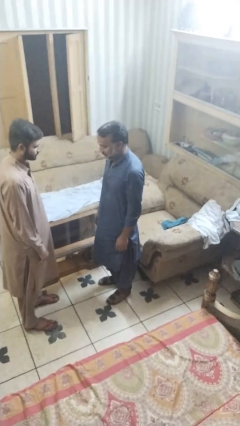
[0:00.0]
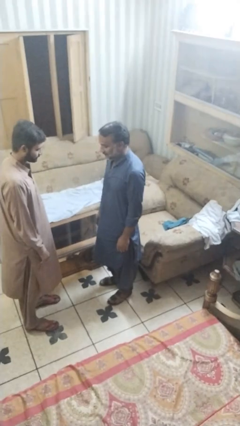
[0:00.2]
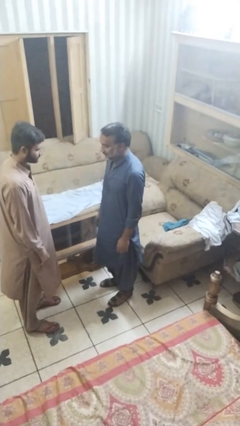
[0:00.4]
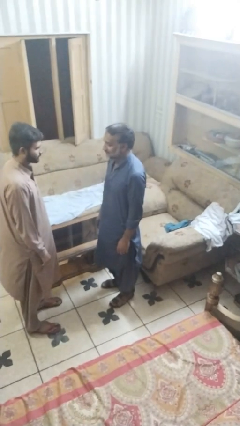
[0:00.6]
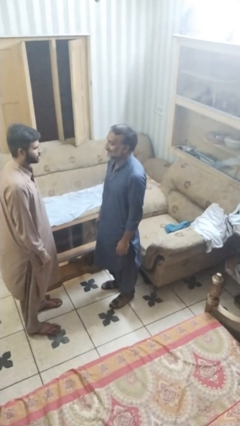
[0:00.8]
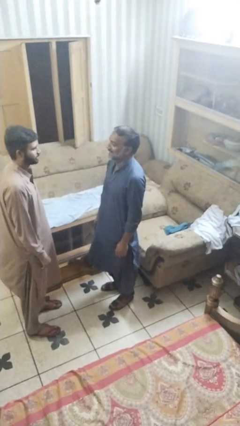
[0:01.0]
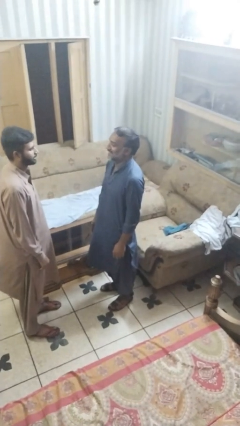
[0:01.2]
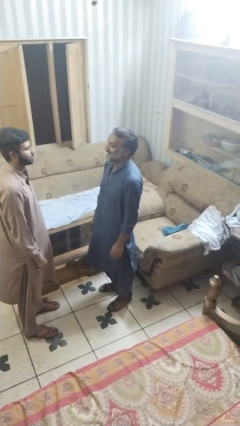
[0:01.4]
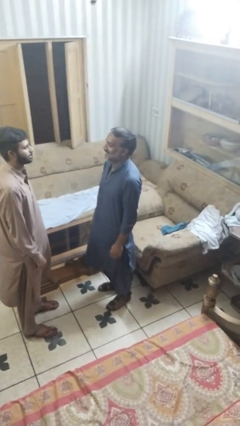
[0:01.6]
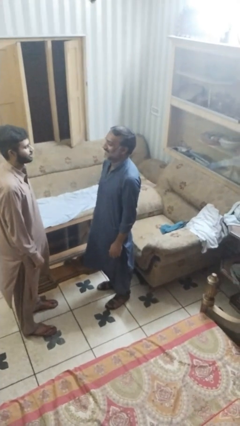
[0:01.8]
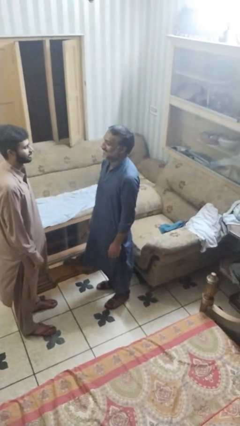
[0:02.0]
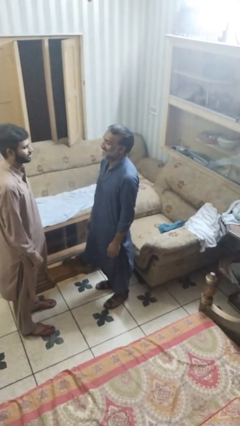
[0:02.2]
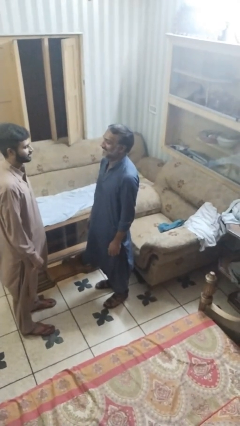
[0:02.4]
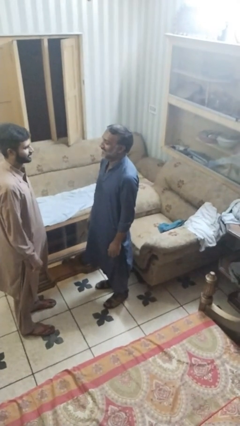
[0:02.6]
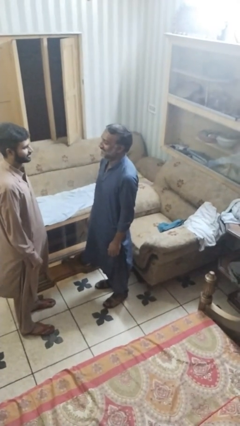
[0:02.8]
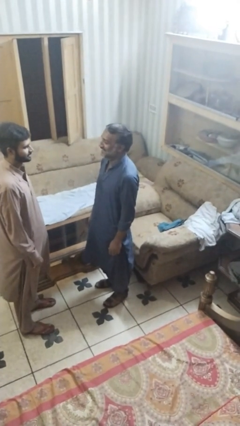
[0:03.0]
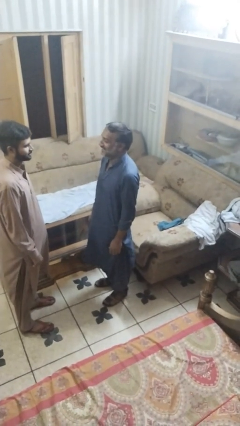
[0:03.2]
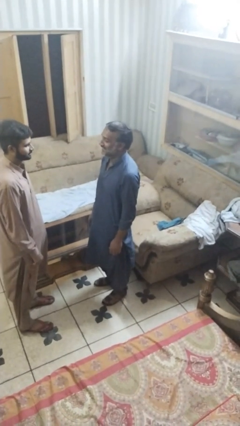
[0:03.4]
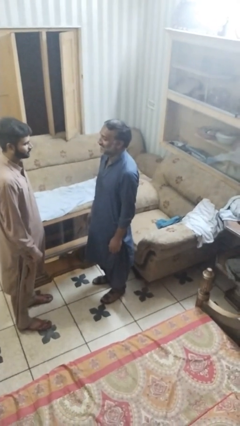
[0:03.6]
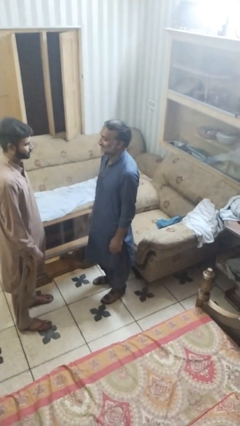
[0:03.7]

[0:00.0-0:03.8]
person laughs with person

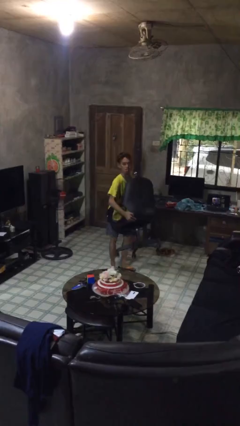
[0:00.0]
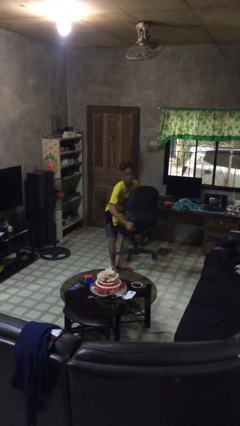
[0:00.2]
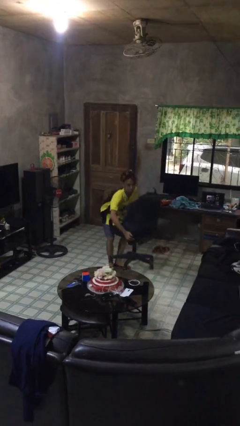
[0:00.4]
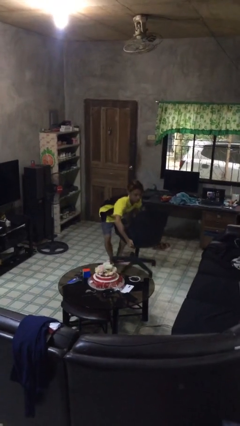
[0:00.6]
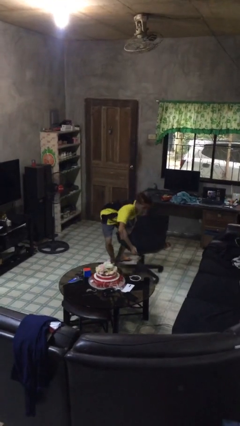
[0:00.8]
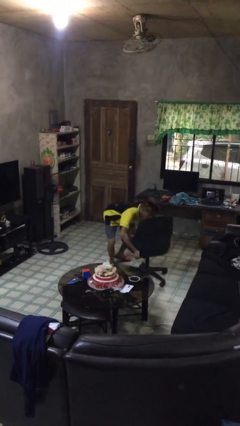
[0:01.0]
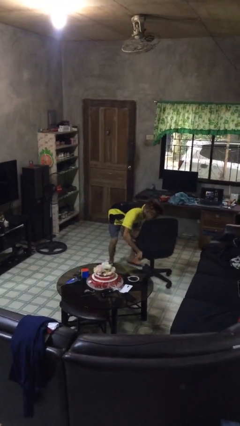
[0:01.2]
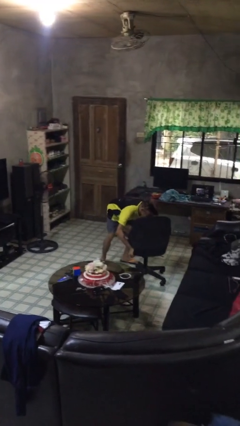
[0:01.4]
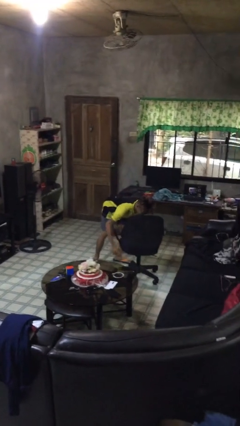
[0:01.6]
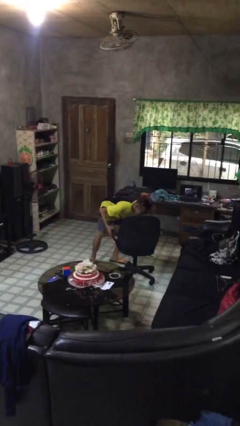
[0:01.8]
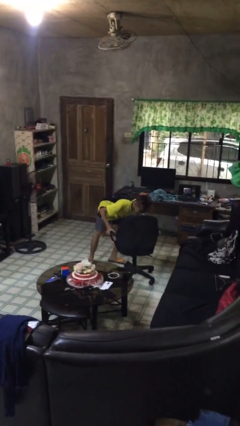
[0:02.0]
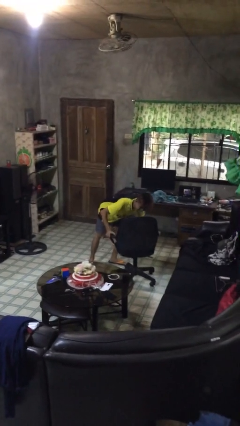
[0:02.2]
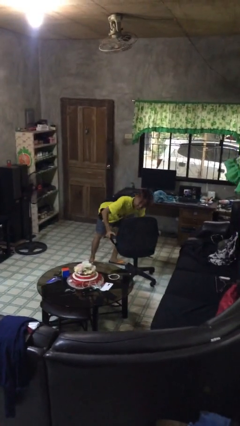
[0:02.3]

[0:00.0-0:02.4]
person puts down object on floor

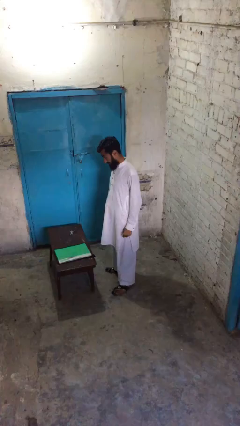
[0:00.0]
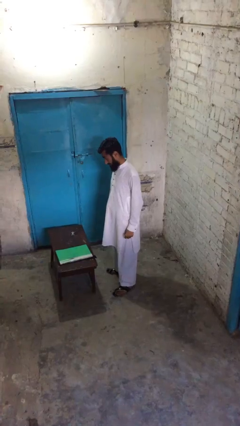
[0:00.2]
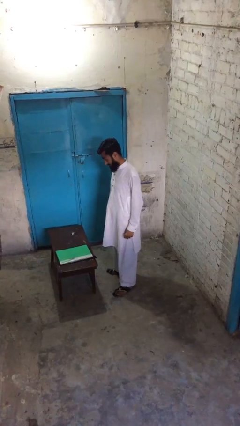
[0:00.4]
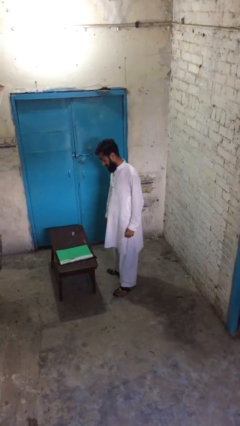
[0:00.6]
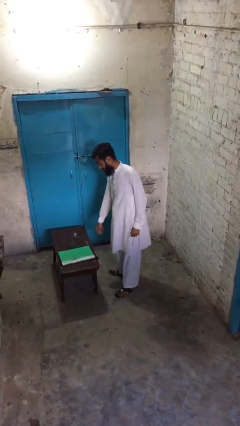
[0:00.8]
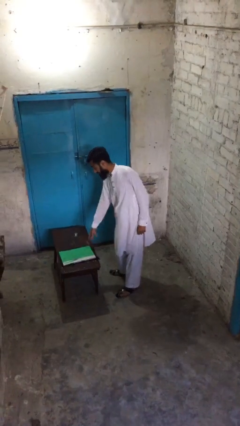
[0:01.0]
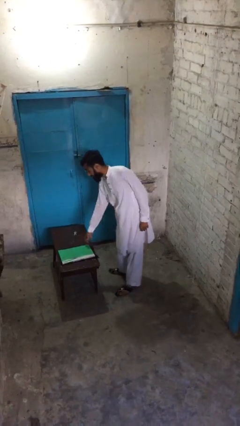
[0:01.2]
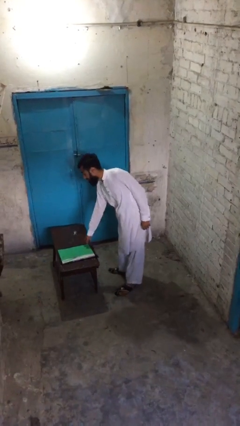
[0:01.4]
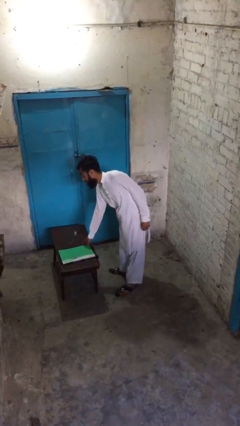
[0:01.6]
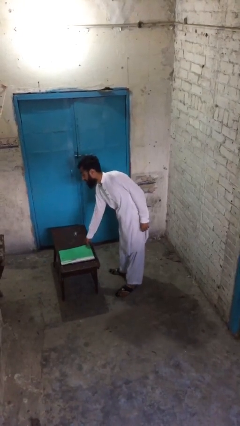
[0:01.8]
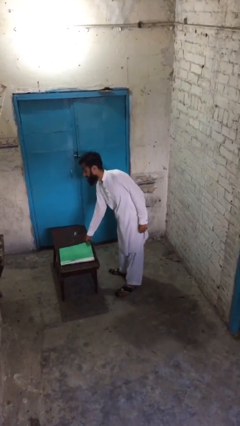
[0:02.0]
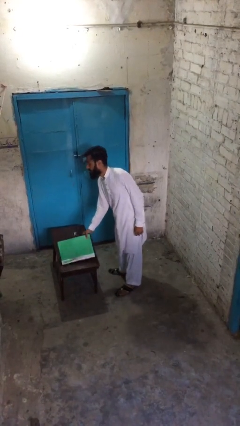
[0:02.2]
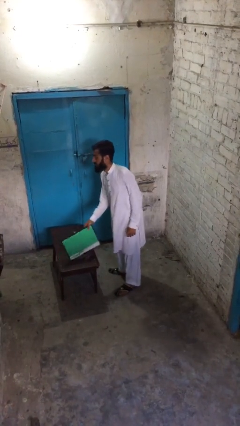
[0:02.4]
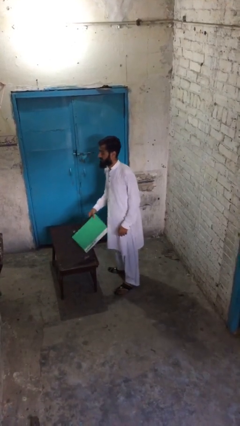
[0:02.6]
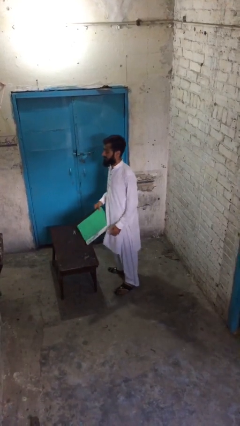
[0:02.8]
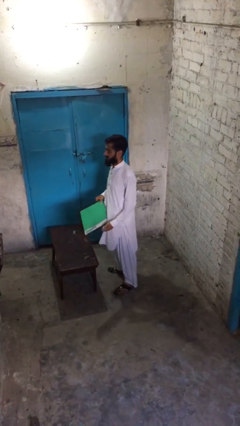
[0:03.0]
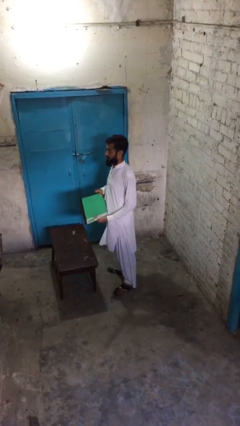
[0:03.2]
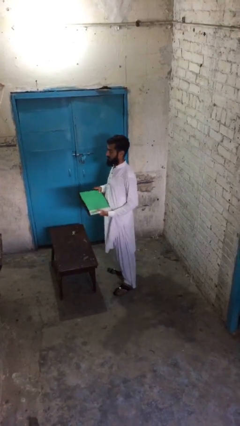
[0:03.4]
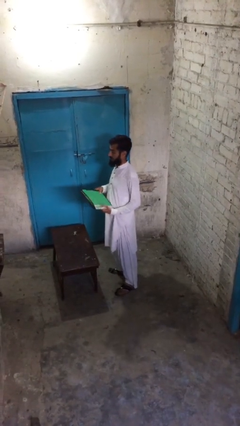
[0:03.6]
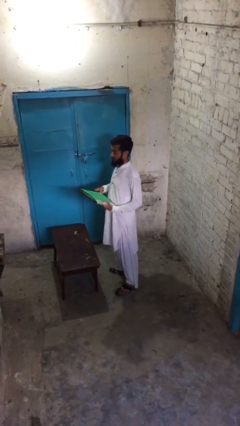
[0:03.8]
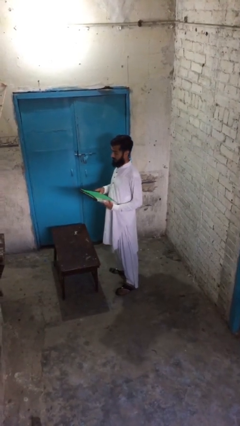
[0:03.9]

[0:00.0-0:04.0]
person picks up object from table

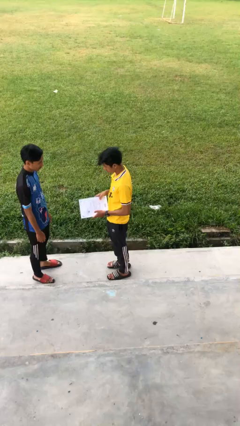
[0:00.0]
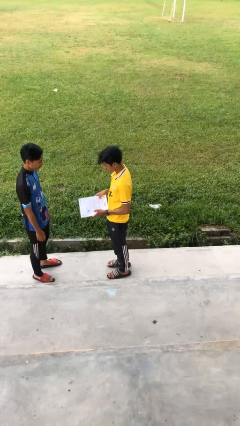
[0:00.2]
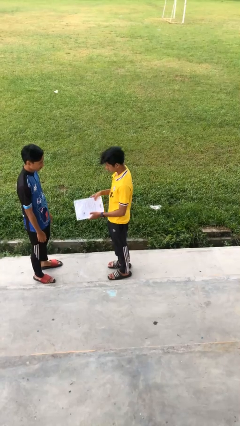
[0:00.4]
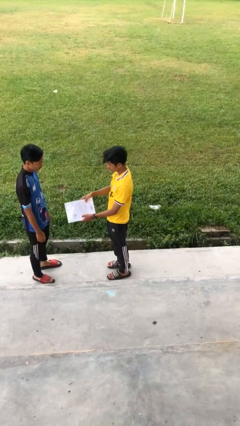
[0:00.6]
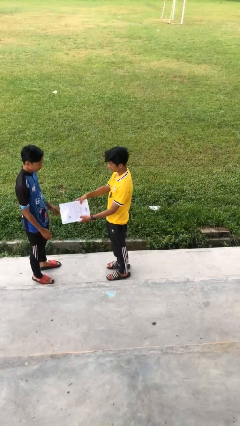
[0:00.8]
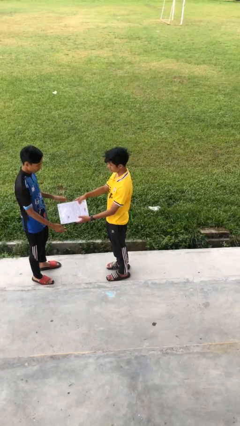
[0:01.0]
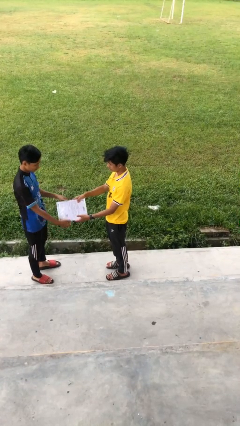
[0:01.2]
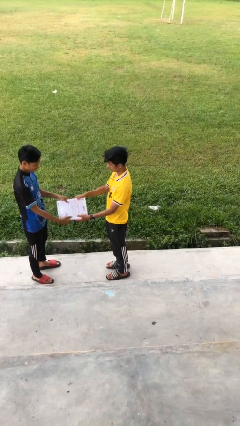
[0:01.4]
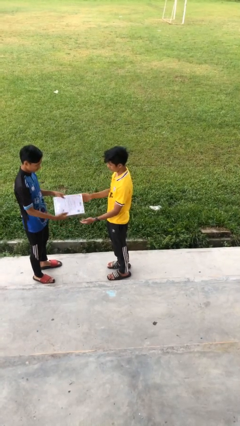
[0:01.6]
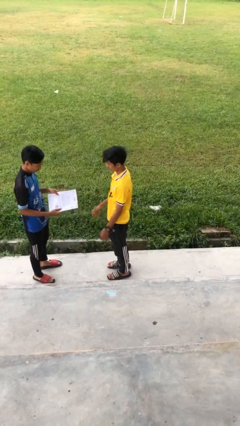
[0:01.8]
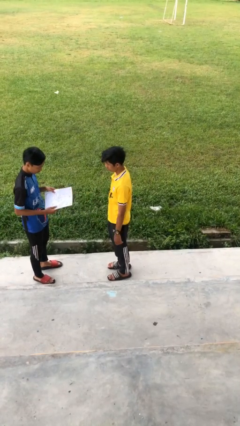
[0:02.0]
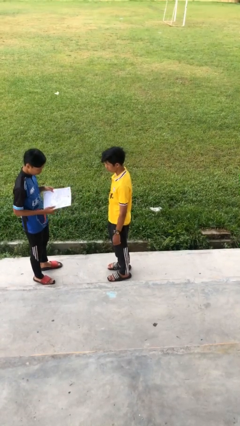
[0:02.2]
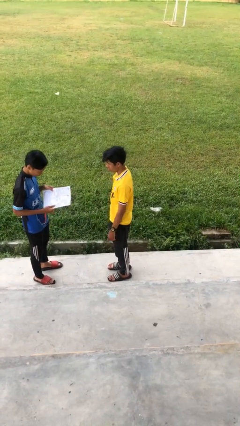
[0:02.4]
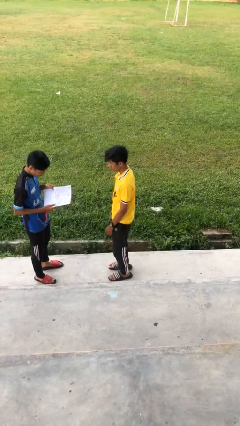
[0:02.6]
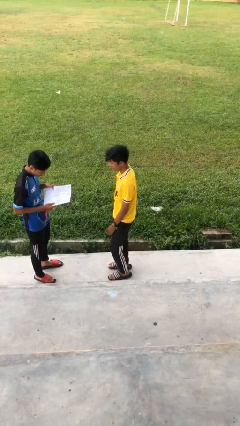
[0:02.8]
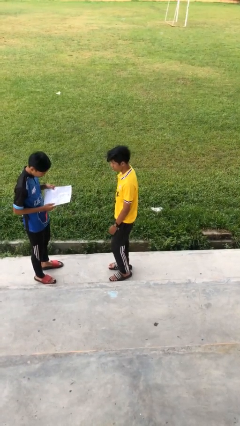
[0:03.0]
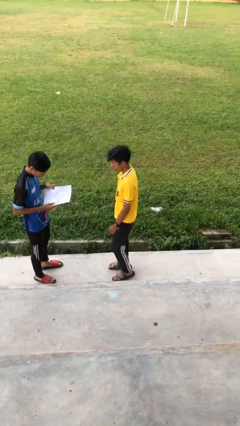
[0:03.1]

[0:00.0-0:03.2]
person transfers object to person

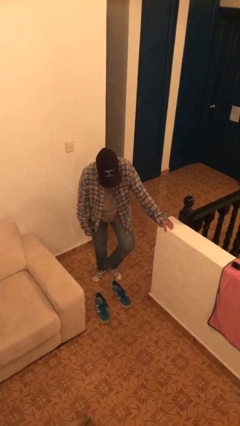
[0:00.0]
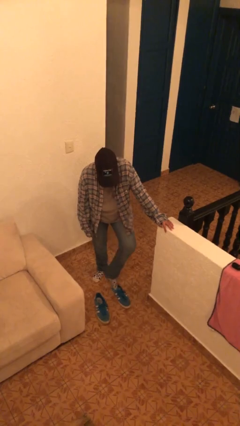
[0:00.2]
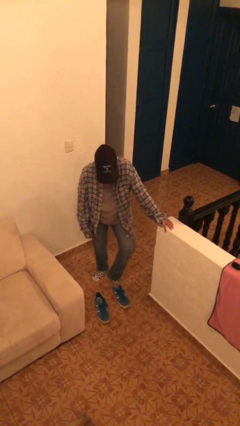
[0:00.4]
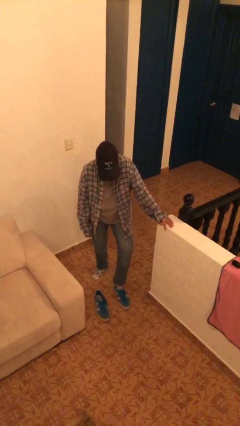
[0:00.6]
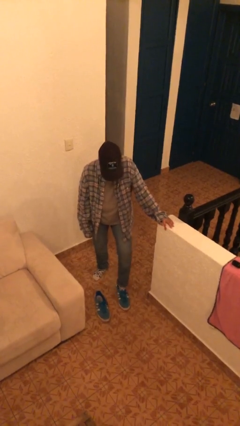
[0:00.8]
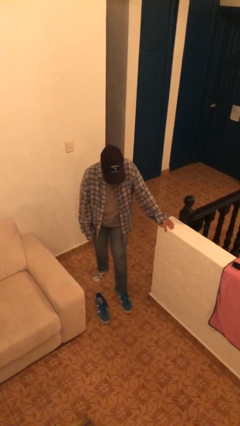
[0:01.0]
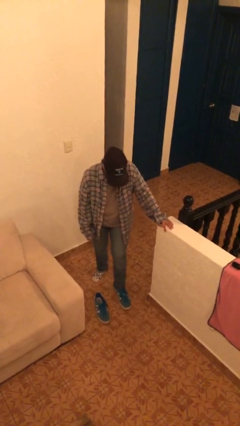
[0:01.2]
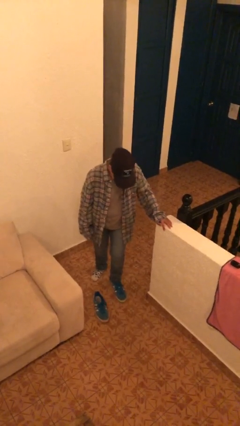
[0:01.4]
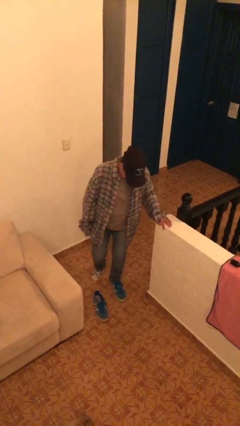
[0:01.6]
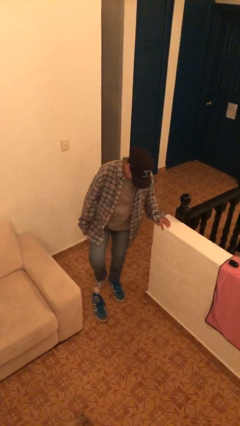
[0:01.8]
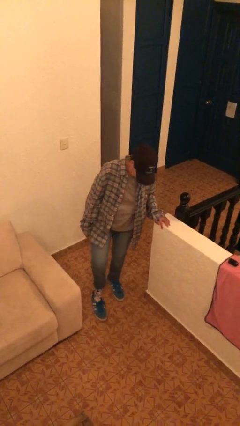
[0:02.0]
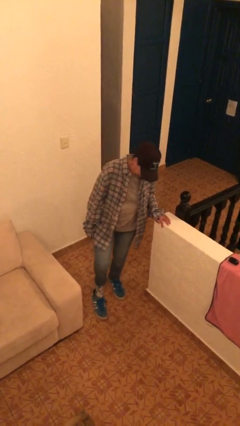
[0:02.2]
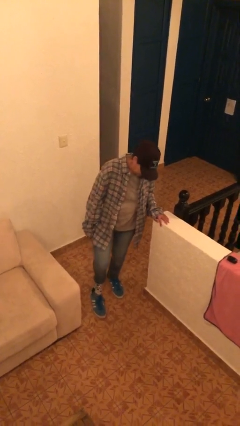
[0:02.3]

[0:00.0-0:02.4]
person puts on shoes

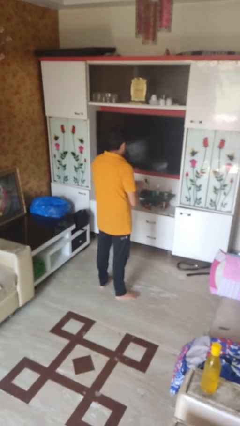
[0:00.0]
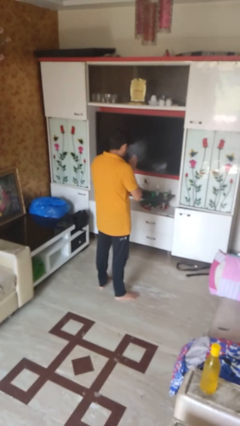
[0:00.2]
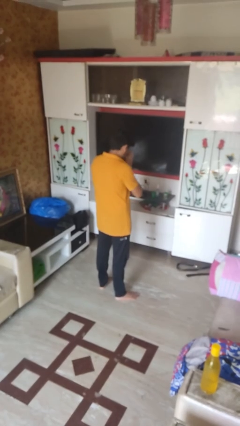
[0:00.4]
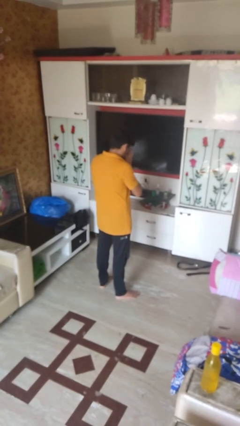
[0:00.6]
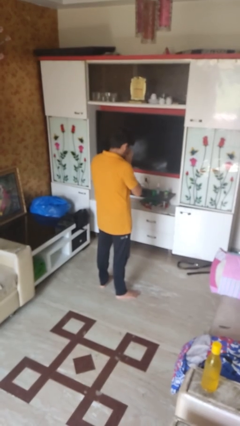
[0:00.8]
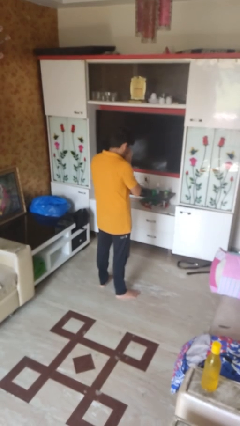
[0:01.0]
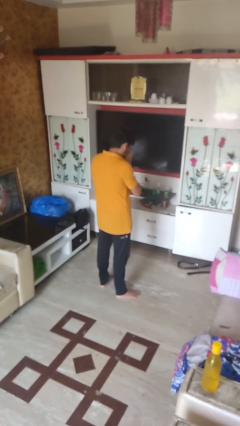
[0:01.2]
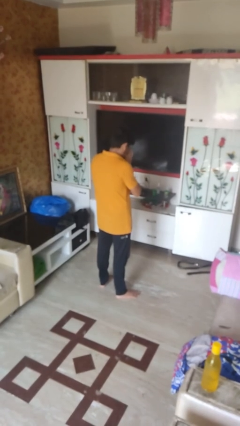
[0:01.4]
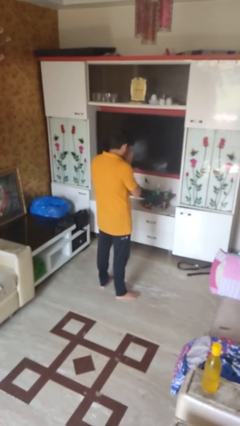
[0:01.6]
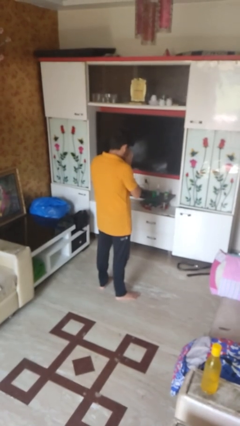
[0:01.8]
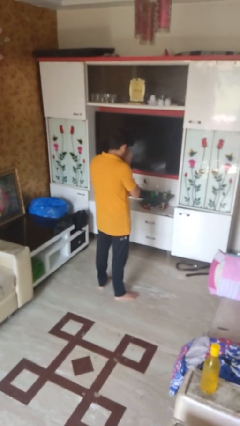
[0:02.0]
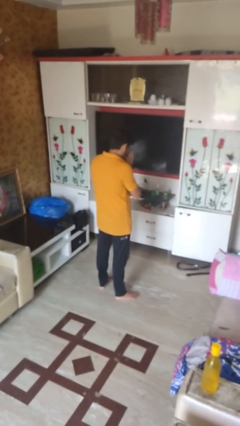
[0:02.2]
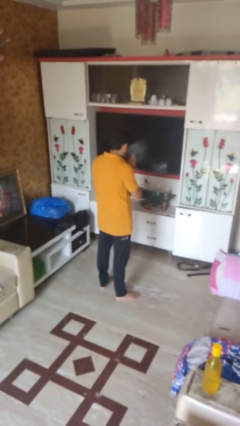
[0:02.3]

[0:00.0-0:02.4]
person prays
